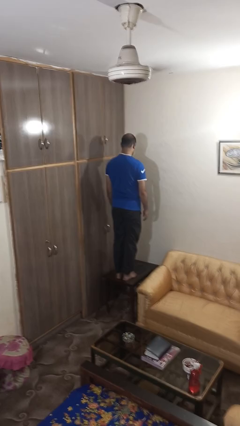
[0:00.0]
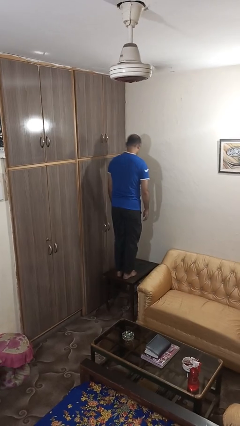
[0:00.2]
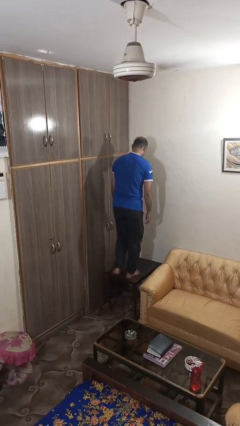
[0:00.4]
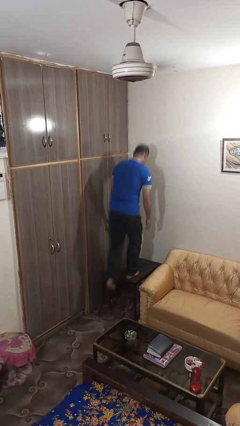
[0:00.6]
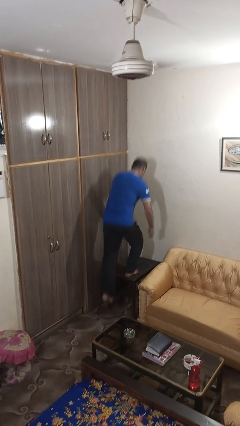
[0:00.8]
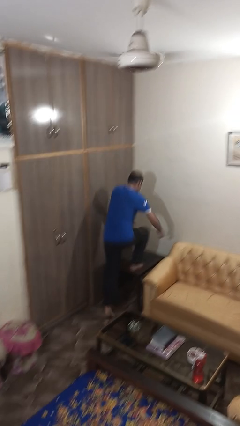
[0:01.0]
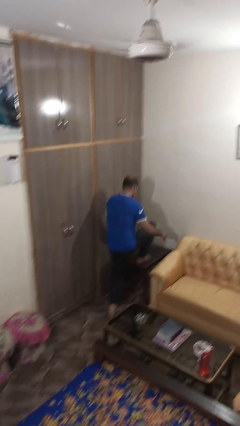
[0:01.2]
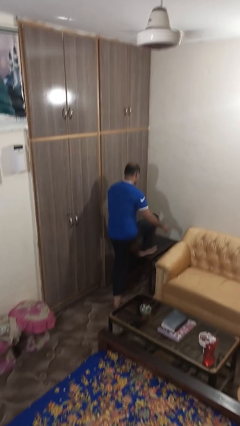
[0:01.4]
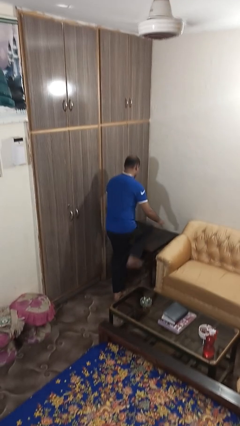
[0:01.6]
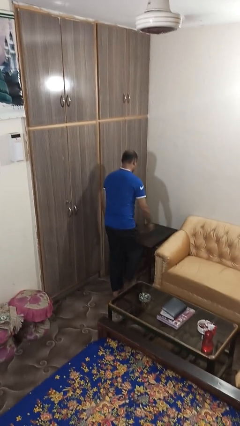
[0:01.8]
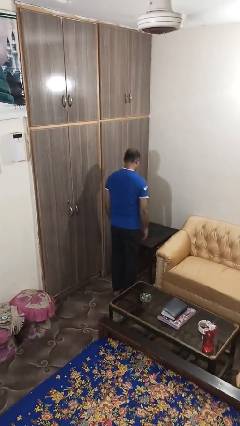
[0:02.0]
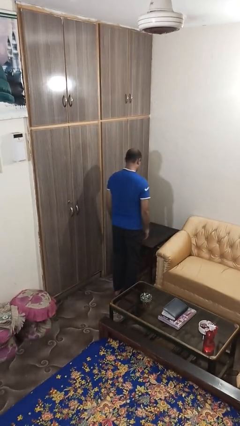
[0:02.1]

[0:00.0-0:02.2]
person climbs off table

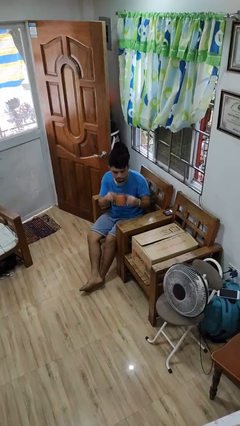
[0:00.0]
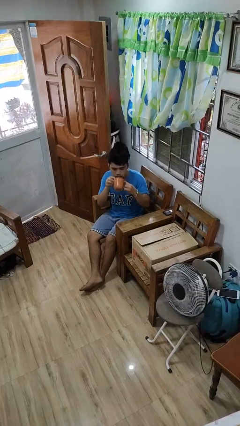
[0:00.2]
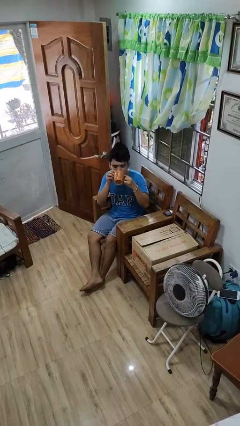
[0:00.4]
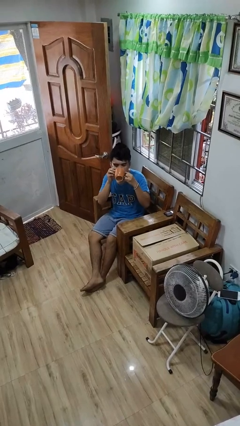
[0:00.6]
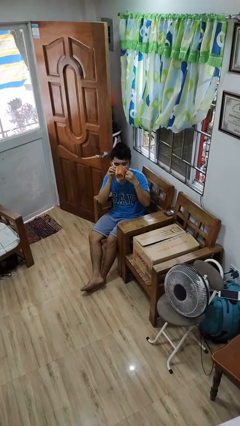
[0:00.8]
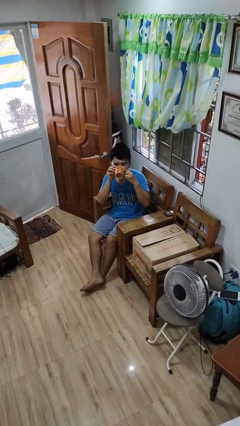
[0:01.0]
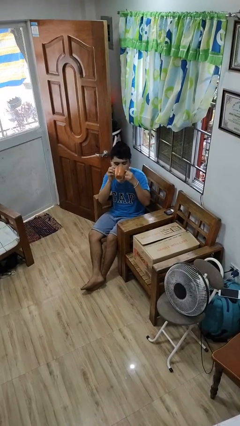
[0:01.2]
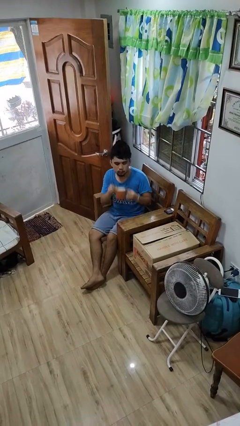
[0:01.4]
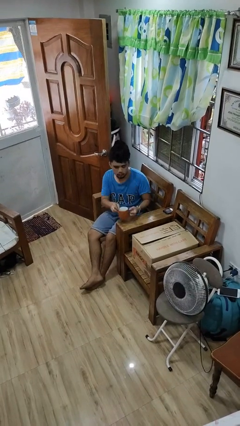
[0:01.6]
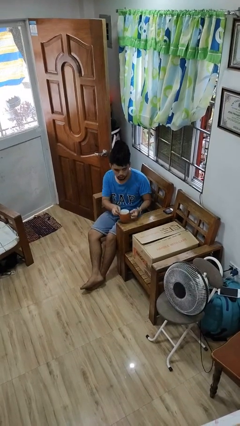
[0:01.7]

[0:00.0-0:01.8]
person drinks from mug

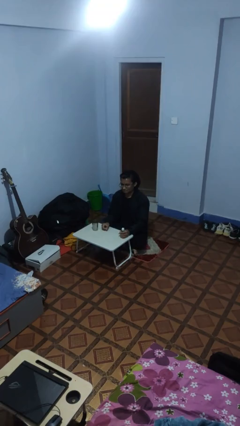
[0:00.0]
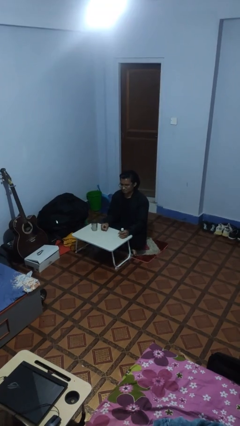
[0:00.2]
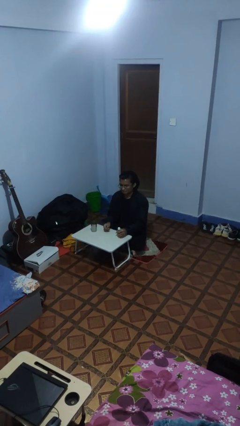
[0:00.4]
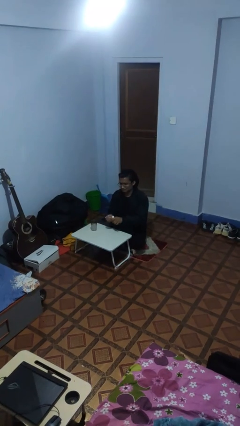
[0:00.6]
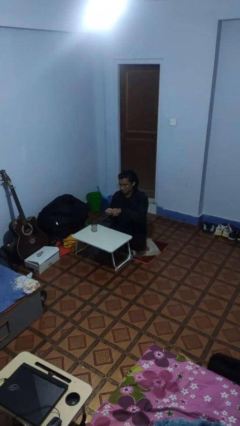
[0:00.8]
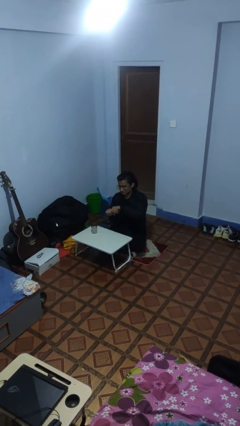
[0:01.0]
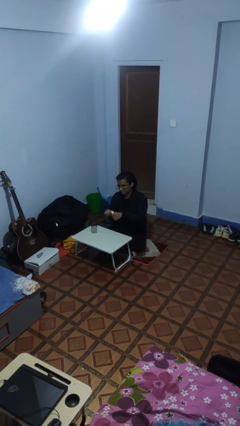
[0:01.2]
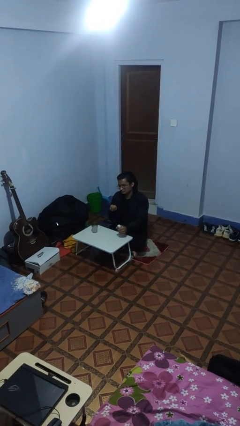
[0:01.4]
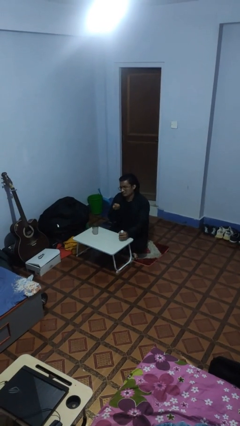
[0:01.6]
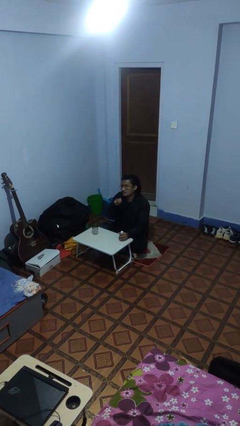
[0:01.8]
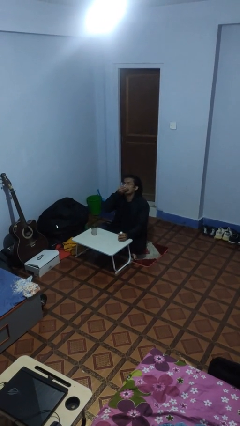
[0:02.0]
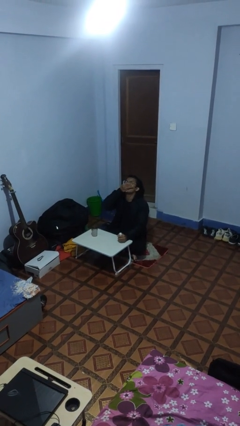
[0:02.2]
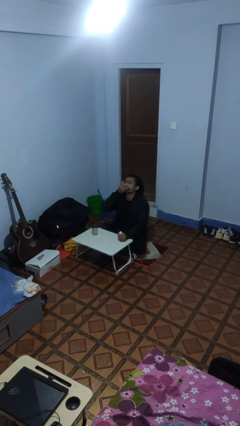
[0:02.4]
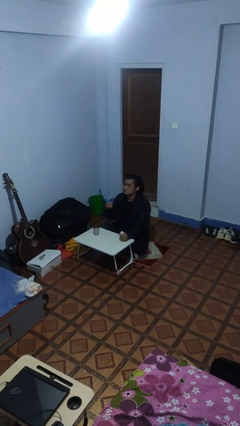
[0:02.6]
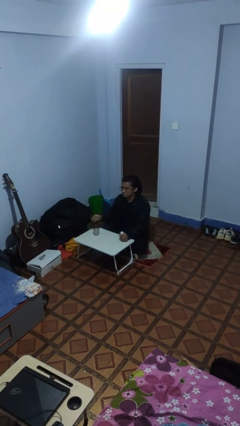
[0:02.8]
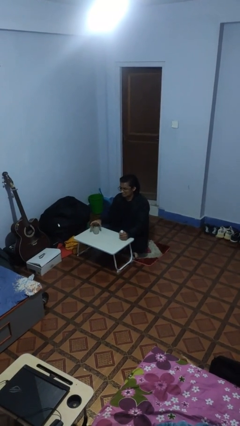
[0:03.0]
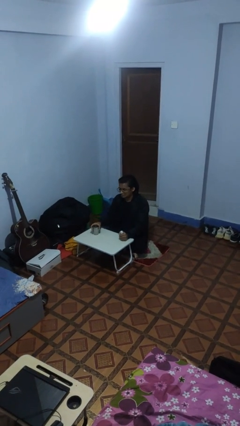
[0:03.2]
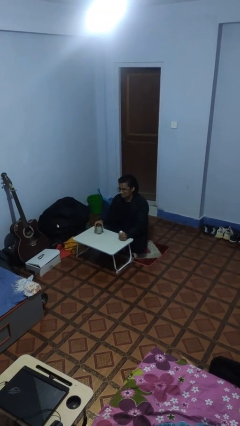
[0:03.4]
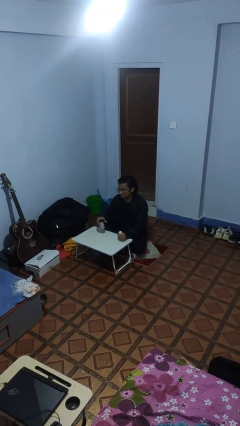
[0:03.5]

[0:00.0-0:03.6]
person takes medicine pills

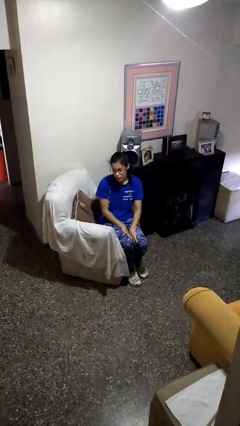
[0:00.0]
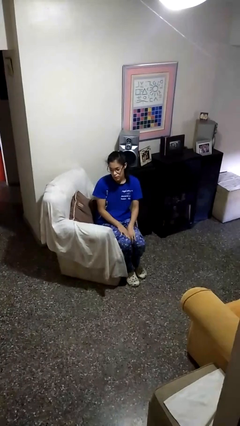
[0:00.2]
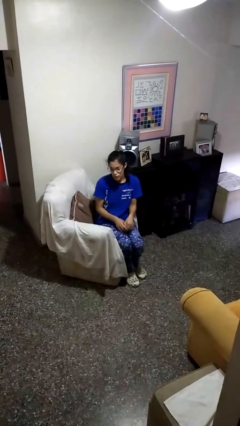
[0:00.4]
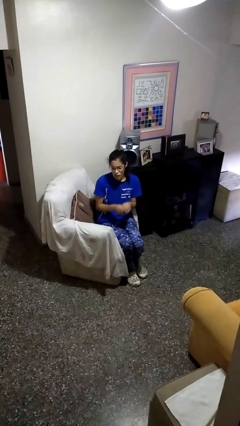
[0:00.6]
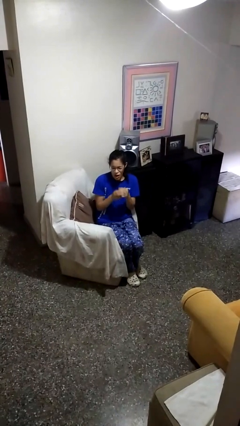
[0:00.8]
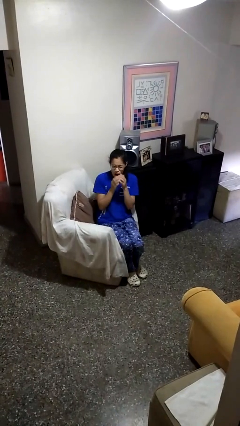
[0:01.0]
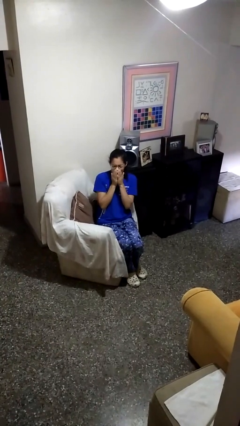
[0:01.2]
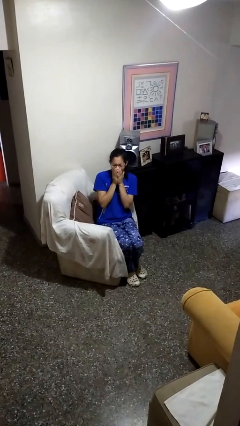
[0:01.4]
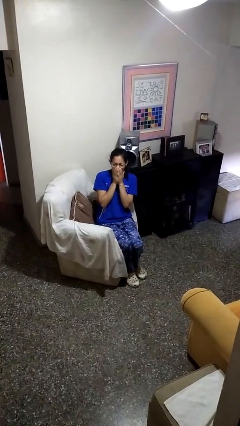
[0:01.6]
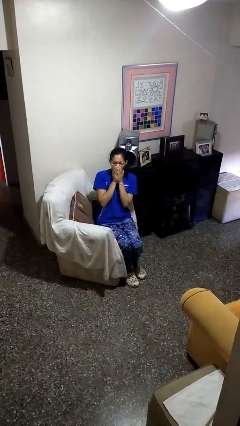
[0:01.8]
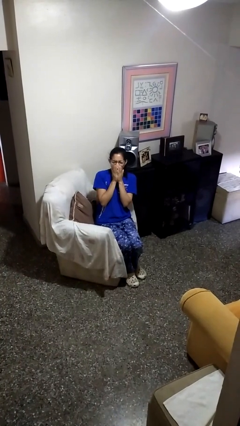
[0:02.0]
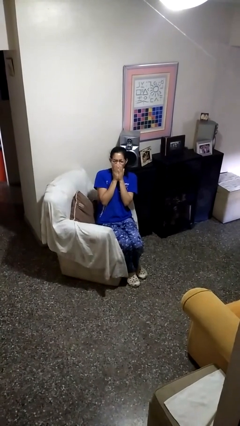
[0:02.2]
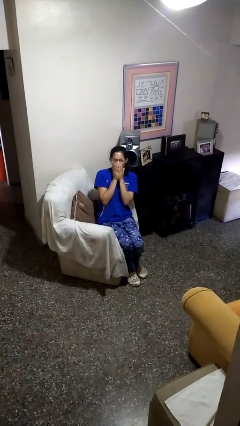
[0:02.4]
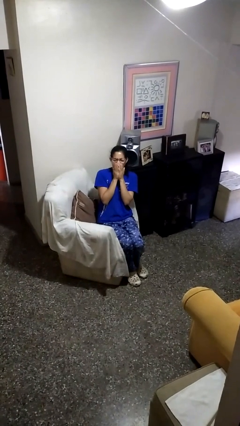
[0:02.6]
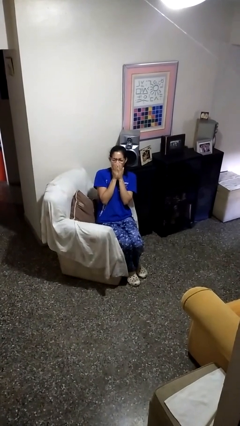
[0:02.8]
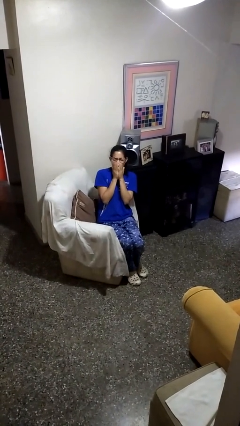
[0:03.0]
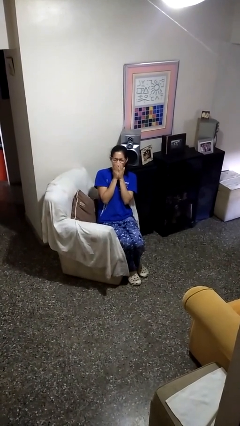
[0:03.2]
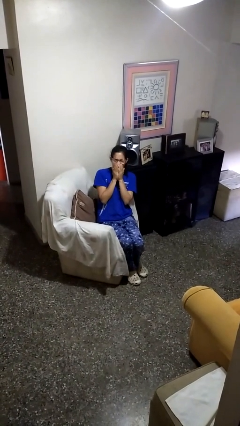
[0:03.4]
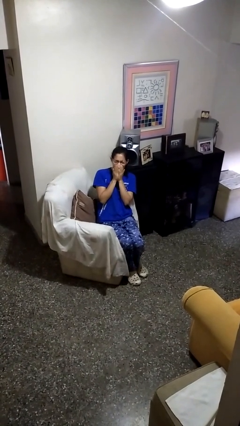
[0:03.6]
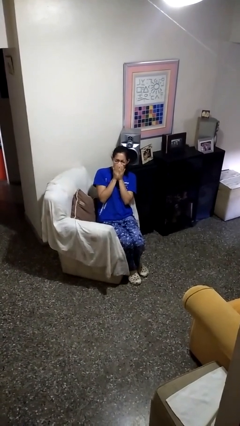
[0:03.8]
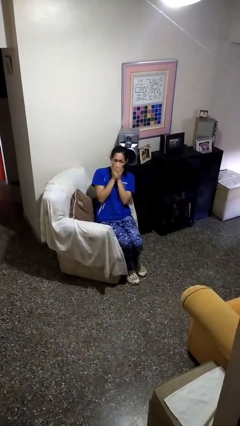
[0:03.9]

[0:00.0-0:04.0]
person yawns

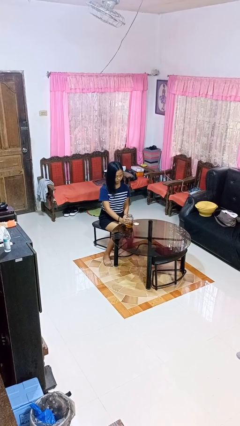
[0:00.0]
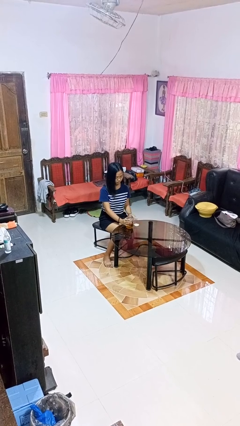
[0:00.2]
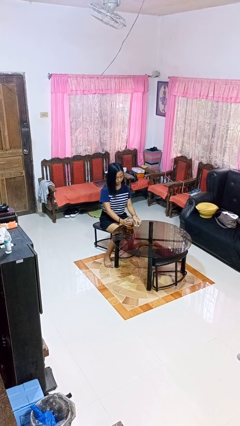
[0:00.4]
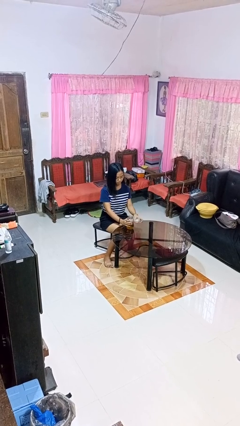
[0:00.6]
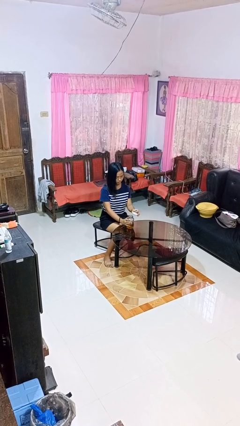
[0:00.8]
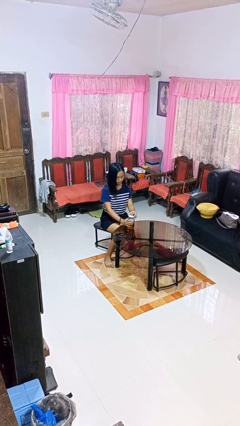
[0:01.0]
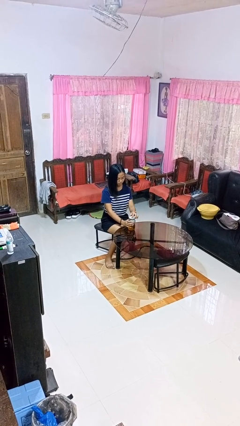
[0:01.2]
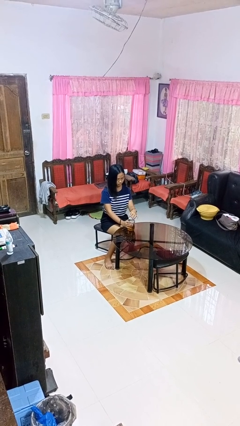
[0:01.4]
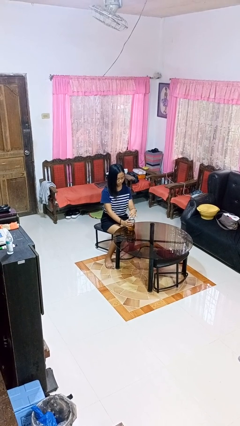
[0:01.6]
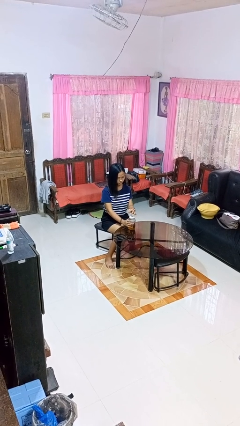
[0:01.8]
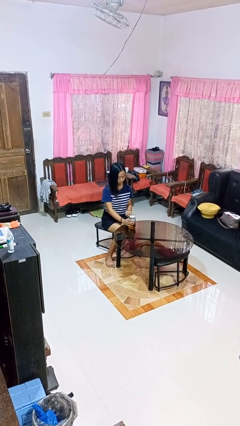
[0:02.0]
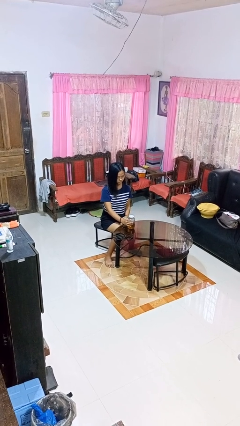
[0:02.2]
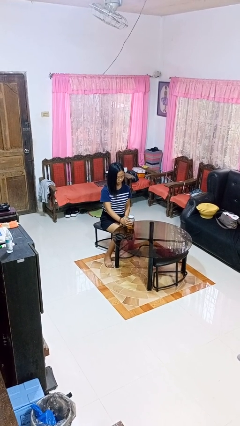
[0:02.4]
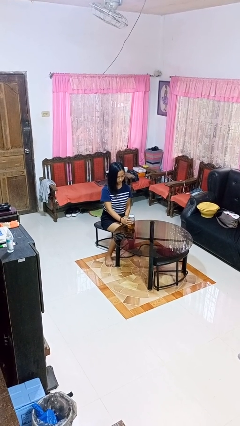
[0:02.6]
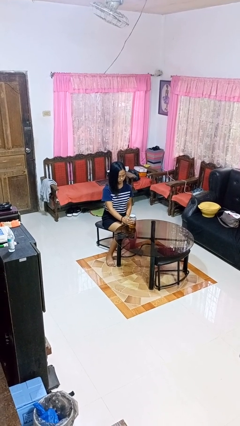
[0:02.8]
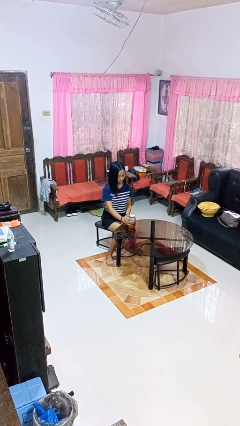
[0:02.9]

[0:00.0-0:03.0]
person closes jar

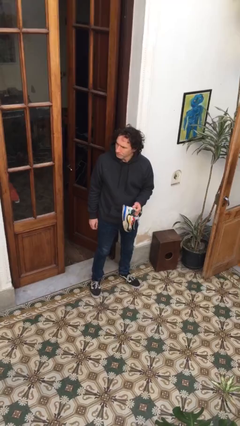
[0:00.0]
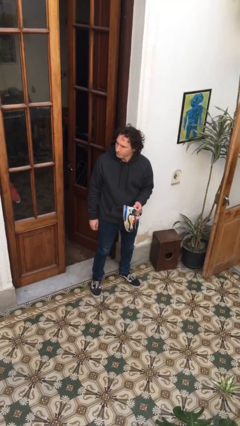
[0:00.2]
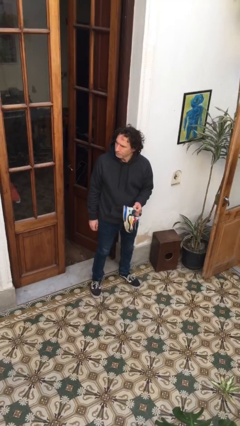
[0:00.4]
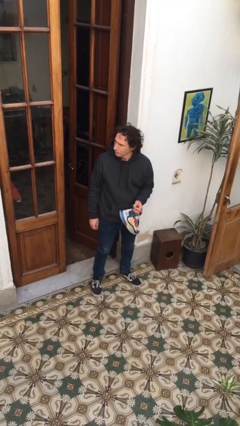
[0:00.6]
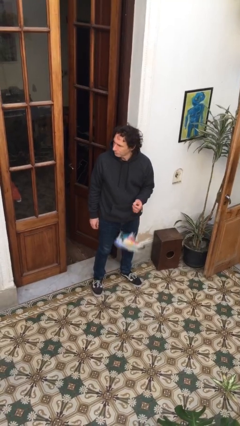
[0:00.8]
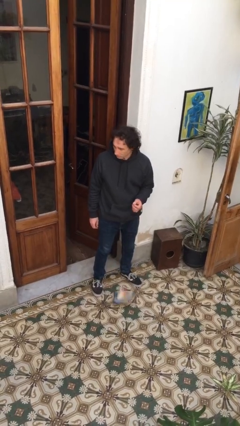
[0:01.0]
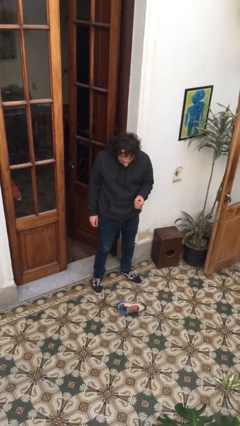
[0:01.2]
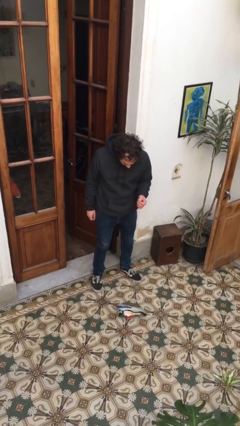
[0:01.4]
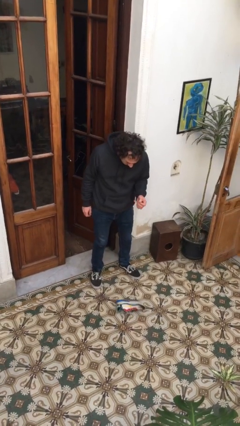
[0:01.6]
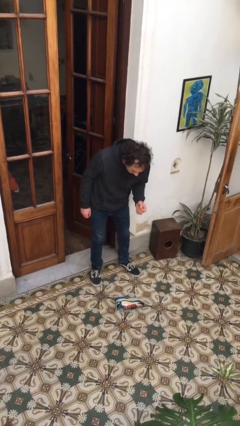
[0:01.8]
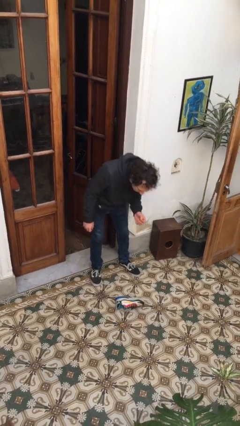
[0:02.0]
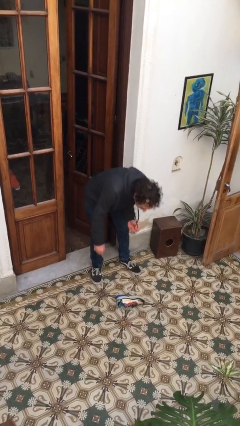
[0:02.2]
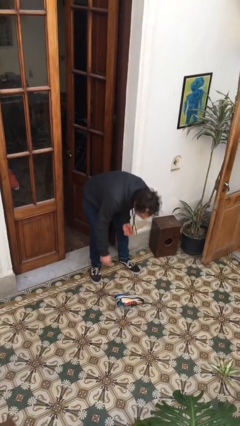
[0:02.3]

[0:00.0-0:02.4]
person drops object
